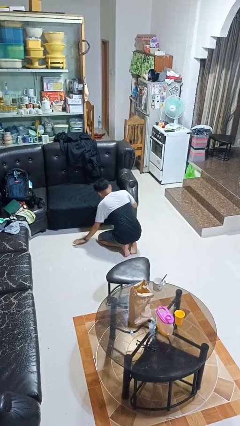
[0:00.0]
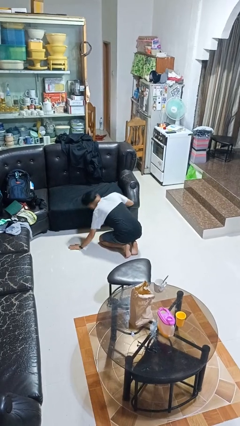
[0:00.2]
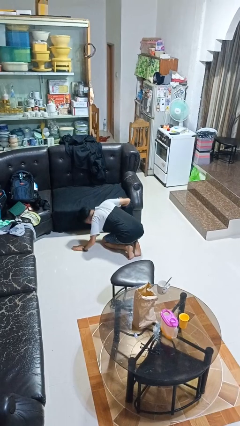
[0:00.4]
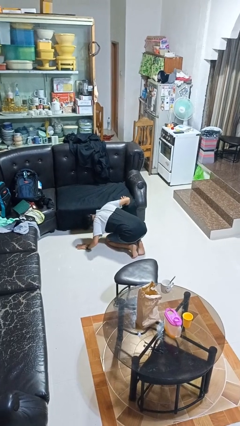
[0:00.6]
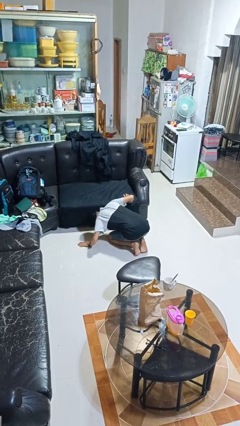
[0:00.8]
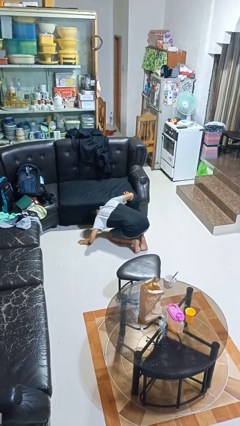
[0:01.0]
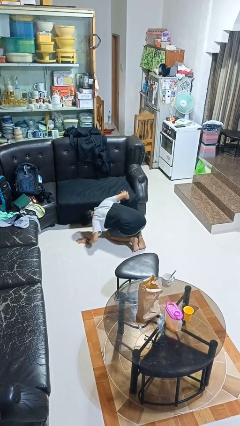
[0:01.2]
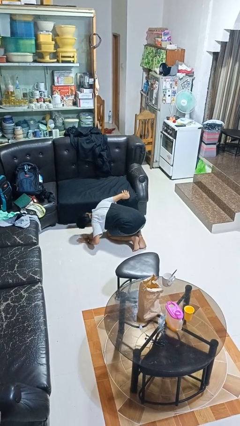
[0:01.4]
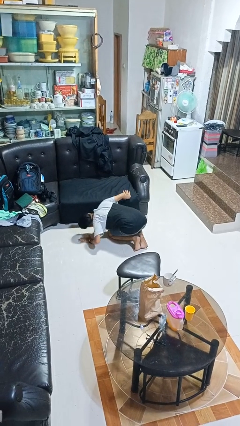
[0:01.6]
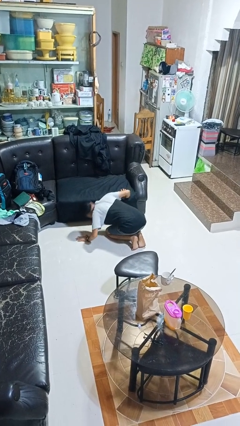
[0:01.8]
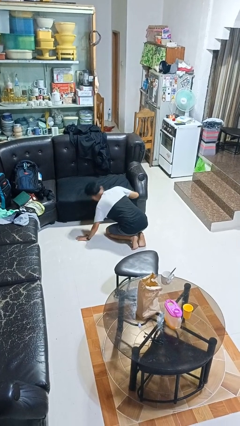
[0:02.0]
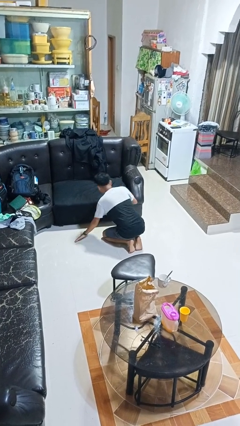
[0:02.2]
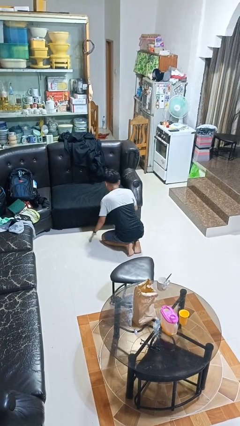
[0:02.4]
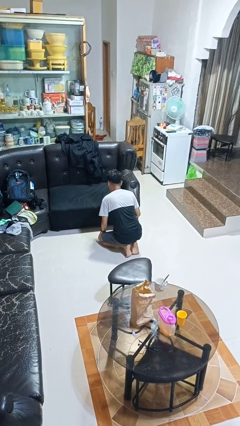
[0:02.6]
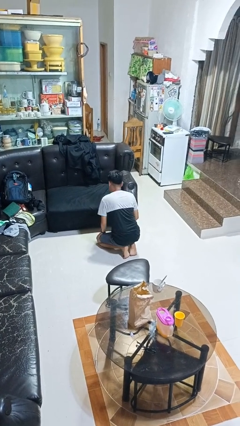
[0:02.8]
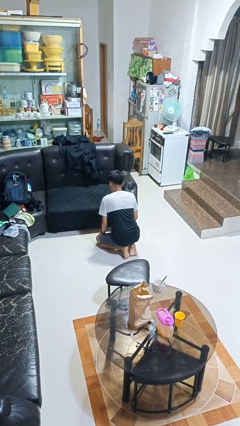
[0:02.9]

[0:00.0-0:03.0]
person searches under couch

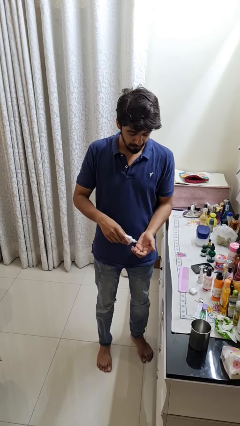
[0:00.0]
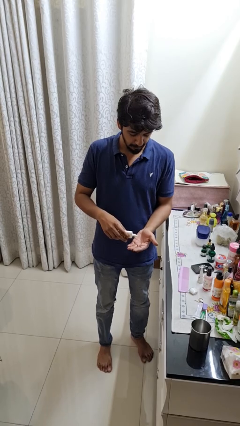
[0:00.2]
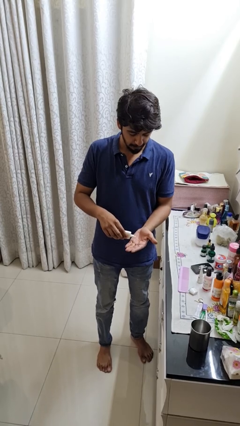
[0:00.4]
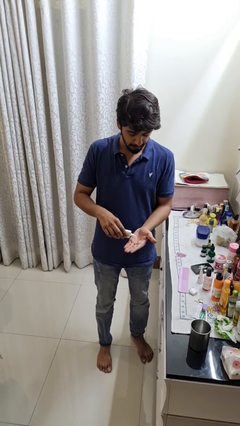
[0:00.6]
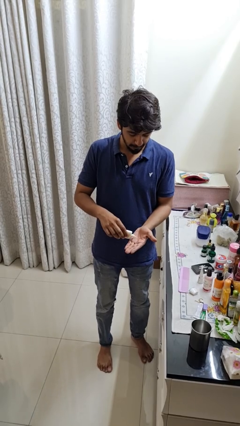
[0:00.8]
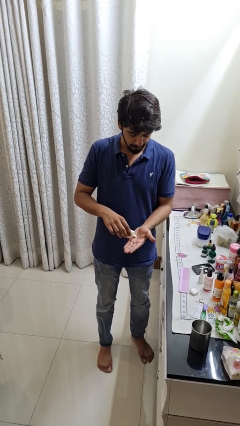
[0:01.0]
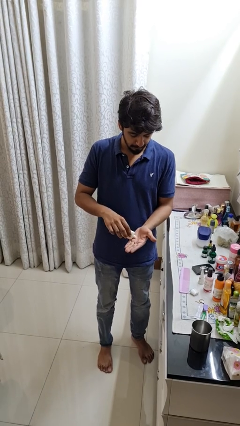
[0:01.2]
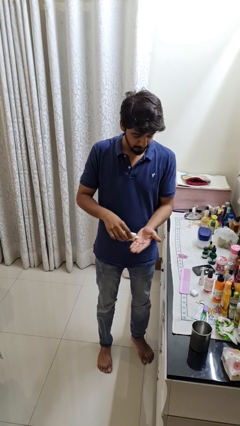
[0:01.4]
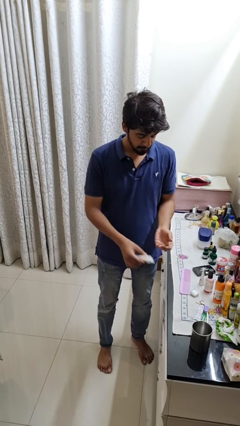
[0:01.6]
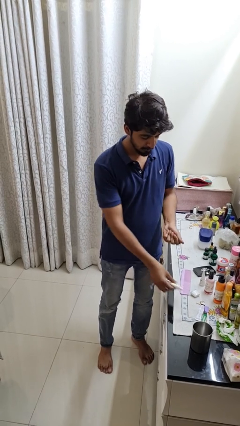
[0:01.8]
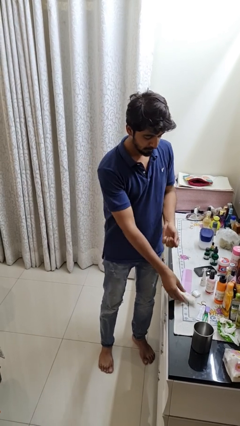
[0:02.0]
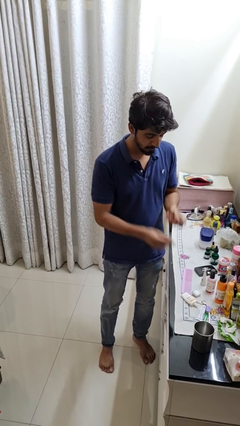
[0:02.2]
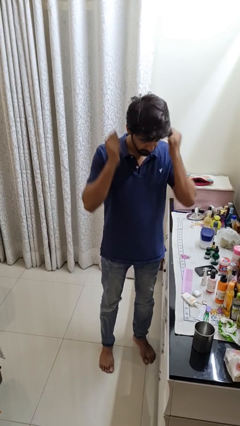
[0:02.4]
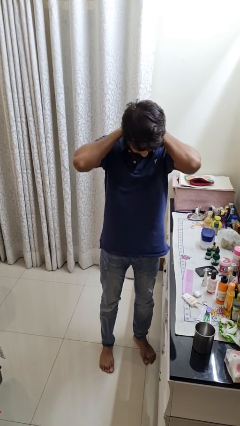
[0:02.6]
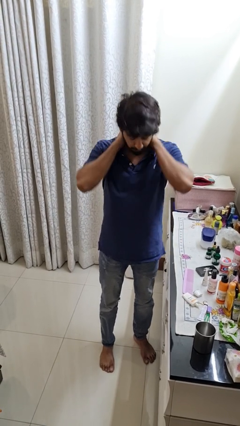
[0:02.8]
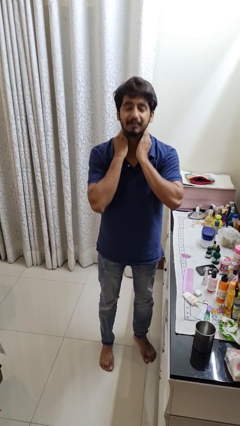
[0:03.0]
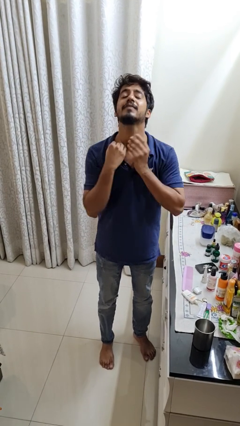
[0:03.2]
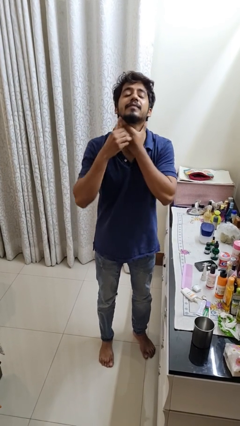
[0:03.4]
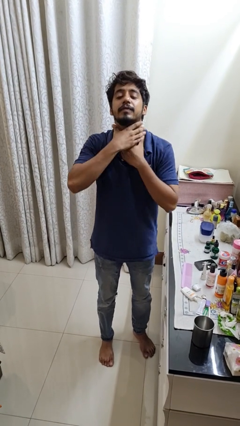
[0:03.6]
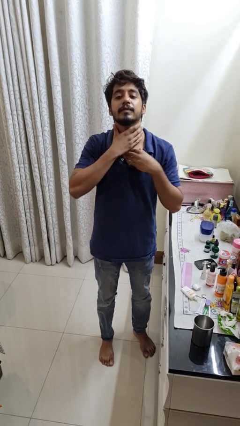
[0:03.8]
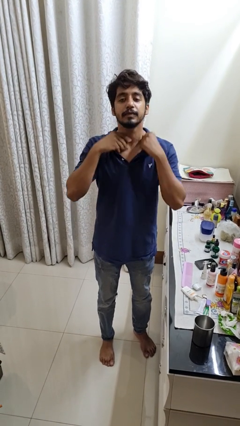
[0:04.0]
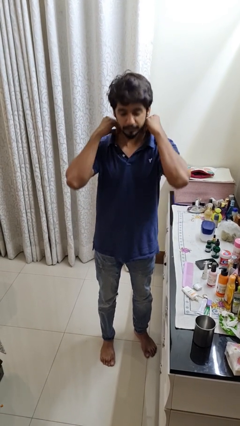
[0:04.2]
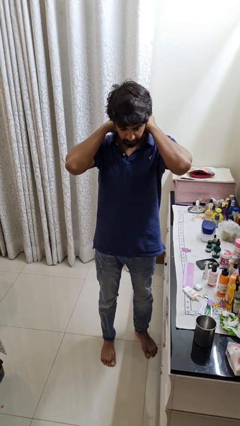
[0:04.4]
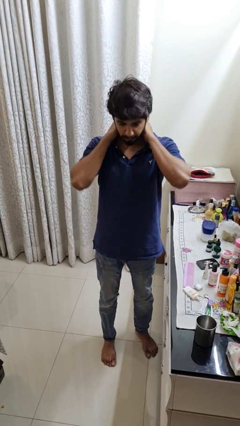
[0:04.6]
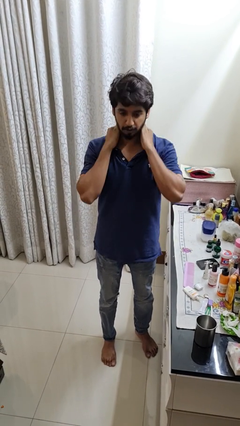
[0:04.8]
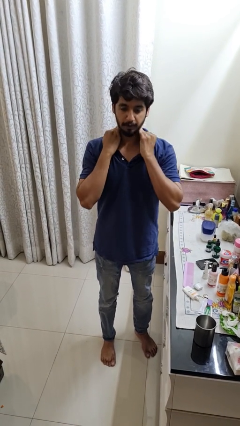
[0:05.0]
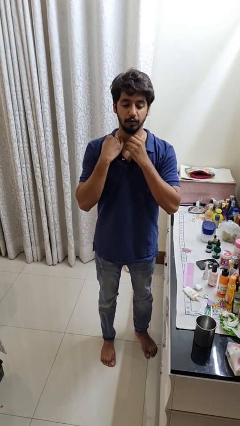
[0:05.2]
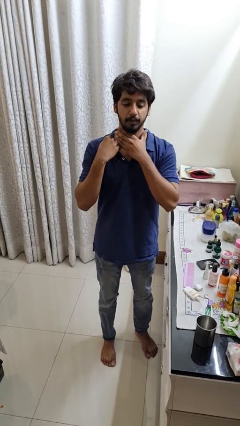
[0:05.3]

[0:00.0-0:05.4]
person applies sunscreen

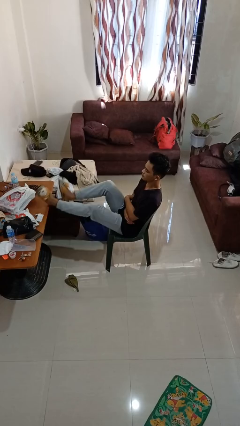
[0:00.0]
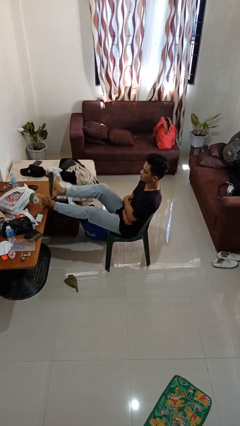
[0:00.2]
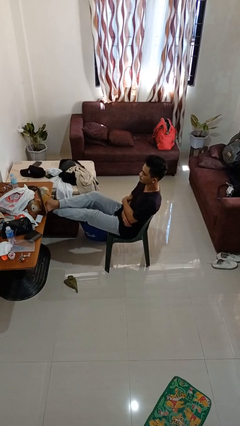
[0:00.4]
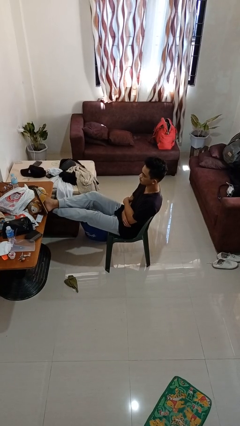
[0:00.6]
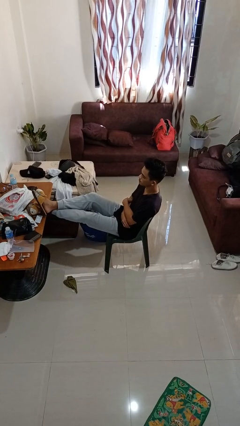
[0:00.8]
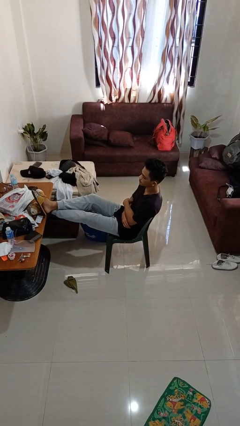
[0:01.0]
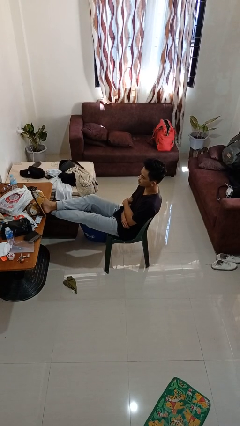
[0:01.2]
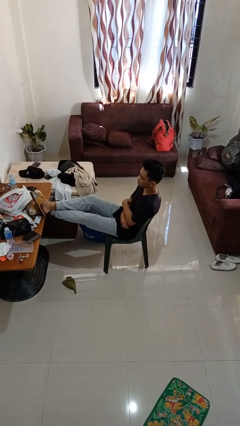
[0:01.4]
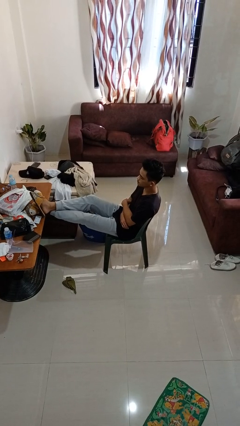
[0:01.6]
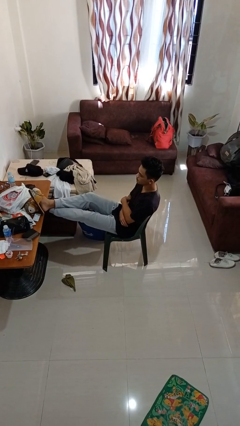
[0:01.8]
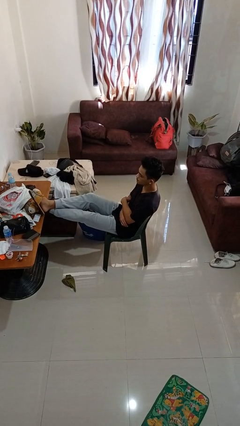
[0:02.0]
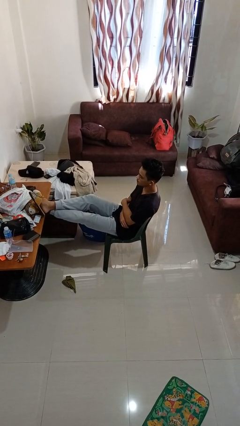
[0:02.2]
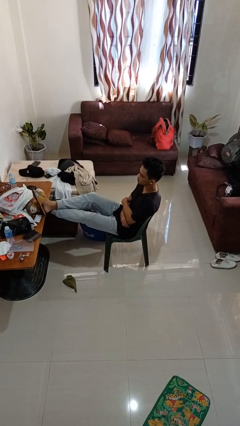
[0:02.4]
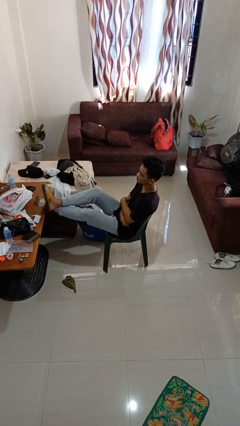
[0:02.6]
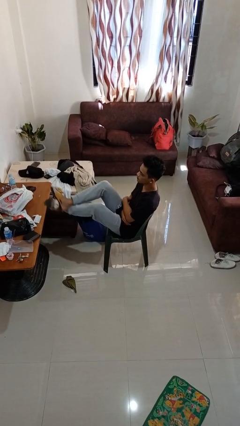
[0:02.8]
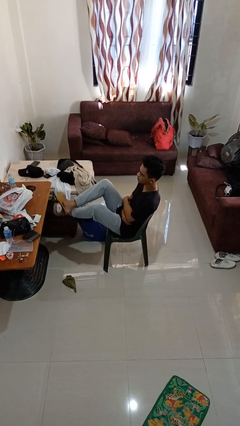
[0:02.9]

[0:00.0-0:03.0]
person puts feet up

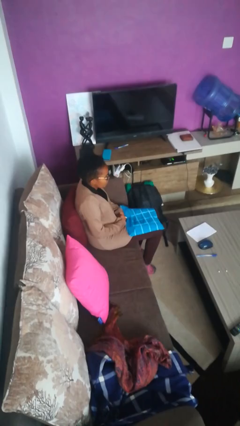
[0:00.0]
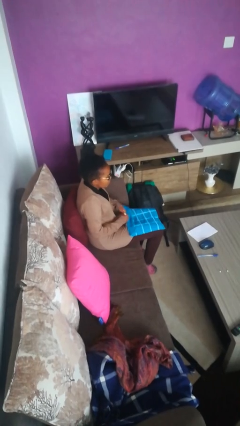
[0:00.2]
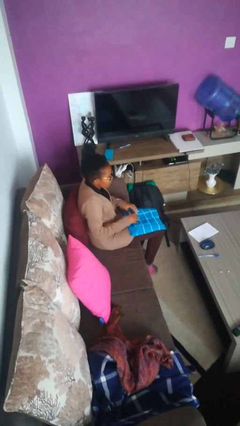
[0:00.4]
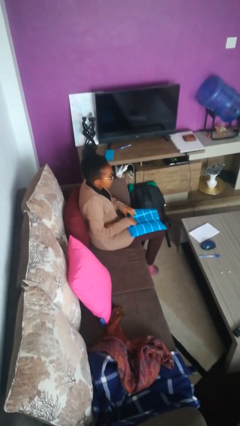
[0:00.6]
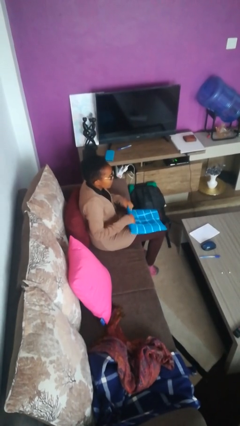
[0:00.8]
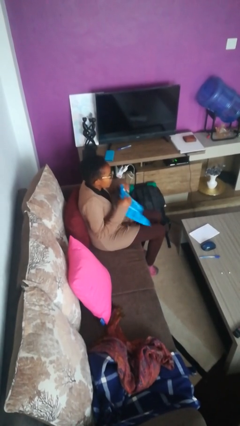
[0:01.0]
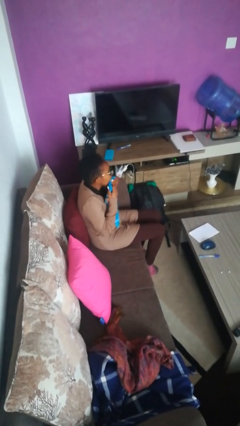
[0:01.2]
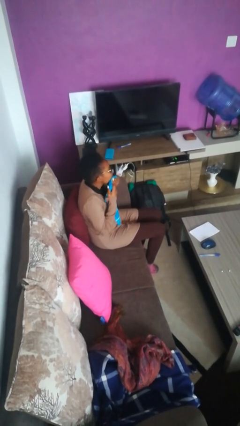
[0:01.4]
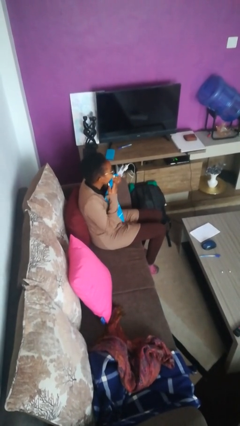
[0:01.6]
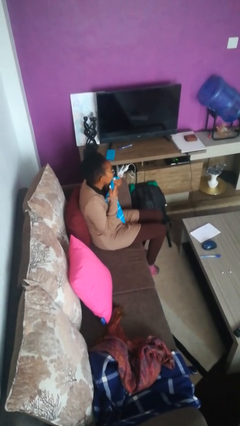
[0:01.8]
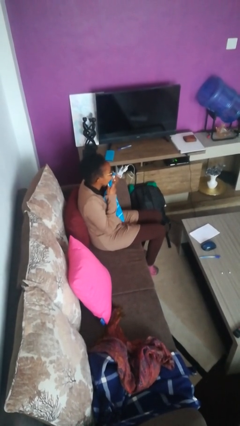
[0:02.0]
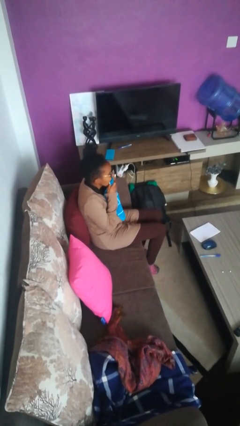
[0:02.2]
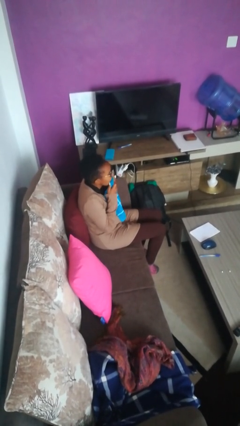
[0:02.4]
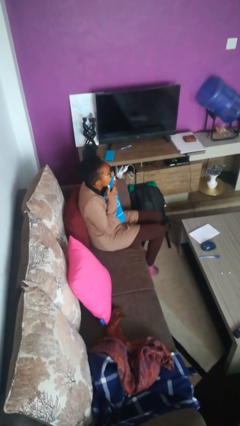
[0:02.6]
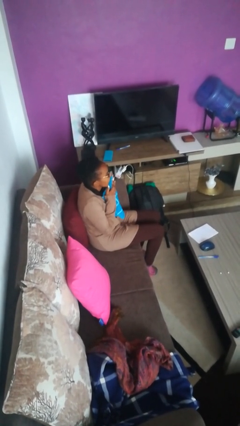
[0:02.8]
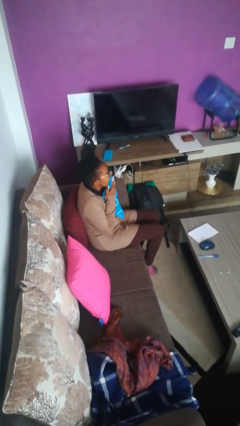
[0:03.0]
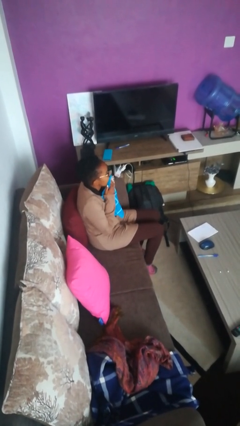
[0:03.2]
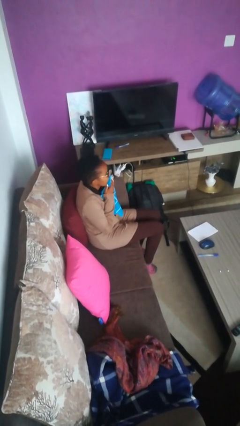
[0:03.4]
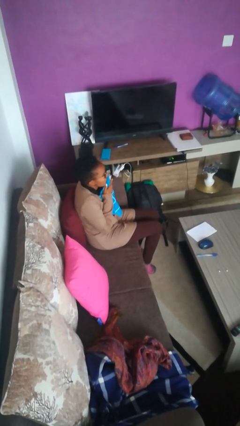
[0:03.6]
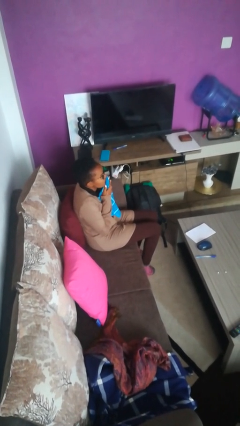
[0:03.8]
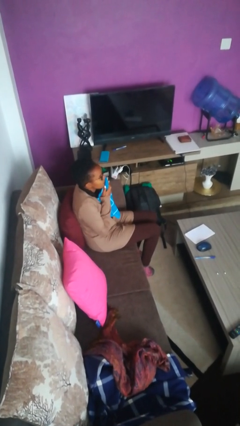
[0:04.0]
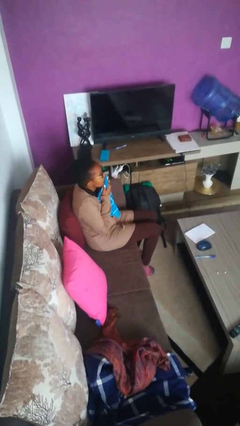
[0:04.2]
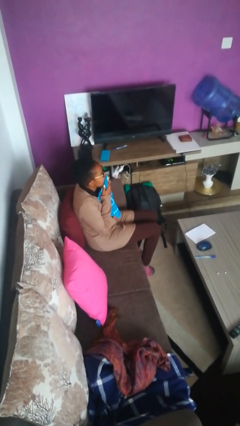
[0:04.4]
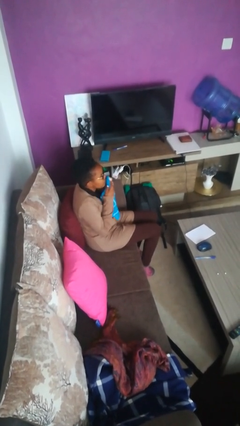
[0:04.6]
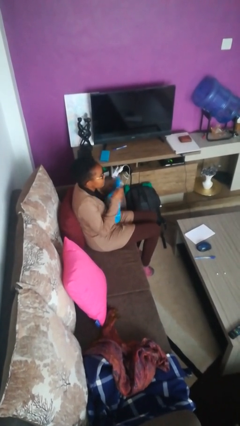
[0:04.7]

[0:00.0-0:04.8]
person wipes mouth with napkin

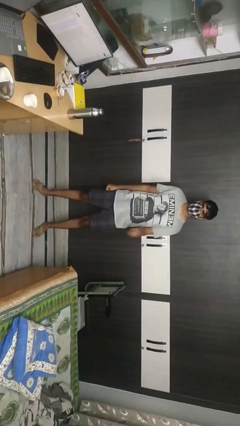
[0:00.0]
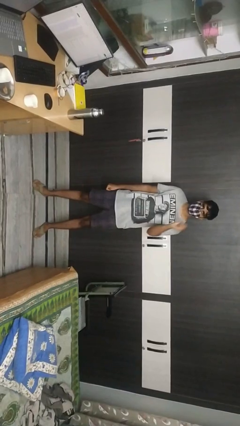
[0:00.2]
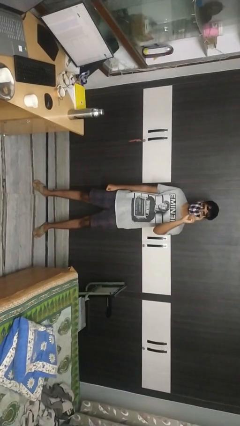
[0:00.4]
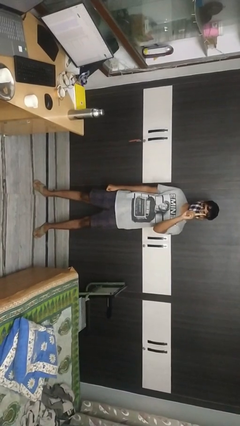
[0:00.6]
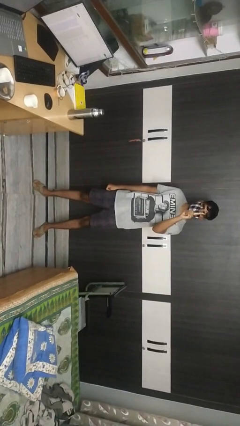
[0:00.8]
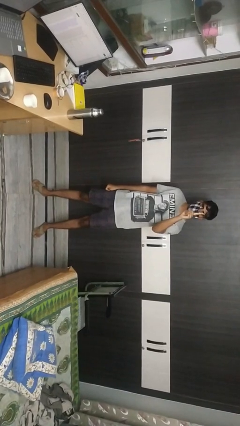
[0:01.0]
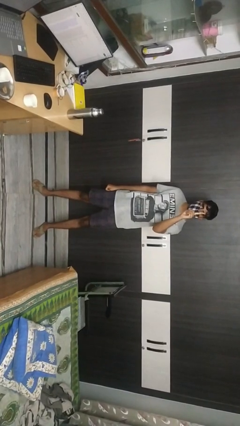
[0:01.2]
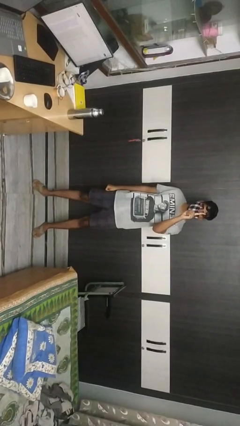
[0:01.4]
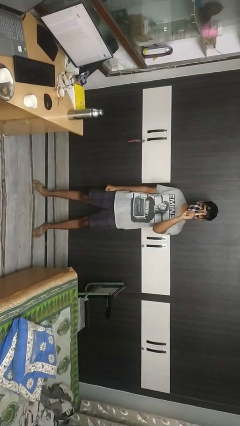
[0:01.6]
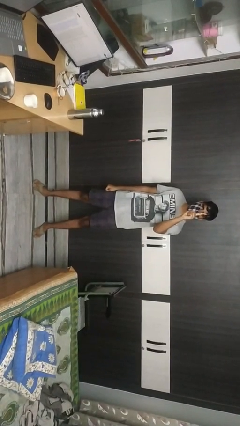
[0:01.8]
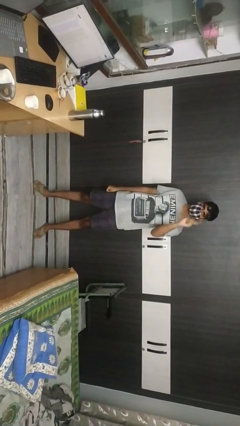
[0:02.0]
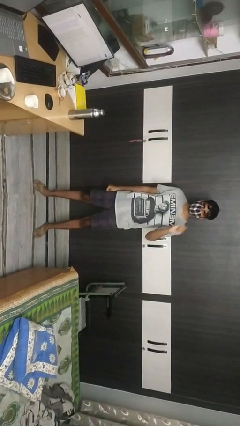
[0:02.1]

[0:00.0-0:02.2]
person gestures number one
